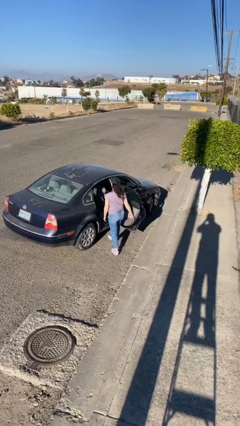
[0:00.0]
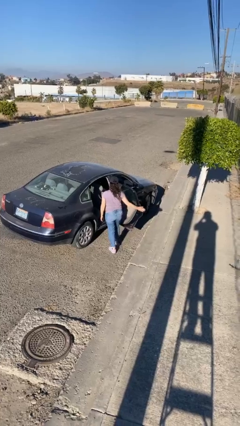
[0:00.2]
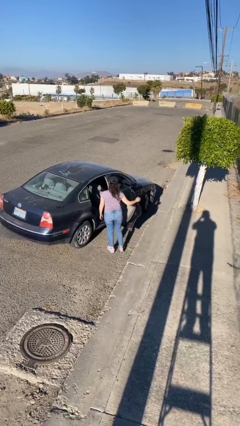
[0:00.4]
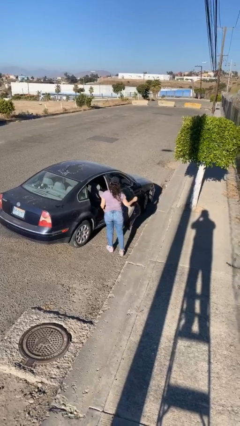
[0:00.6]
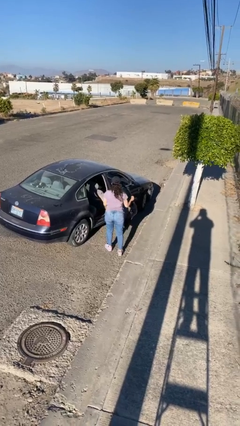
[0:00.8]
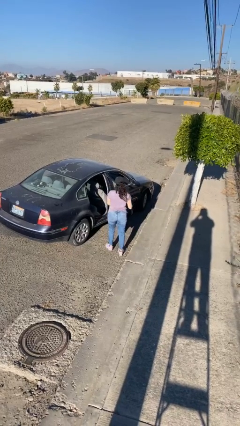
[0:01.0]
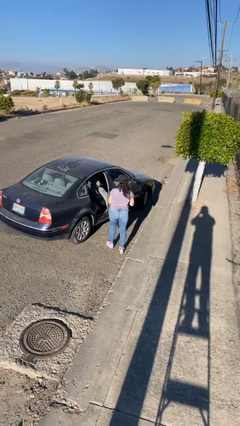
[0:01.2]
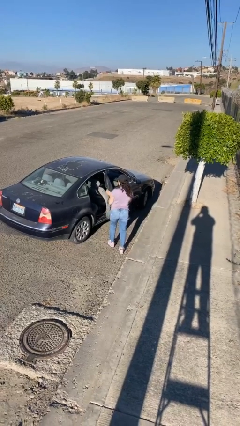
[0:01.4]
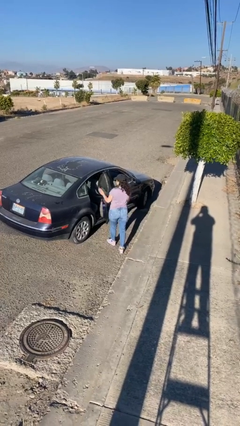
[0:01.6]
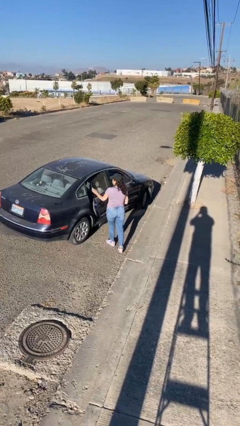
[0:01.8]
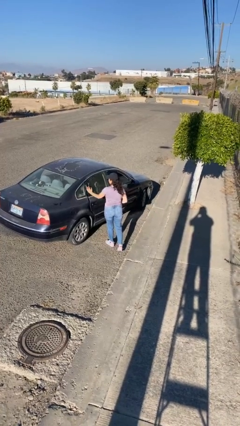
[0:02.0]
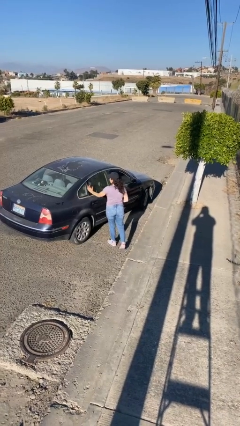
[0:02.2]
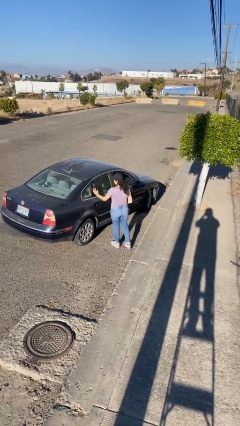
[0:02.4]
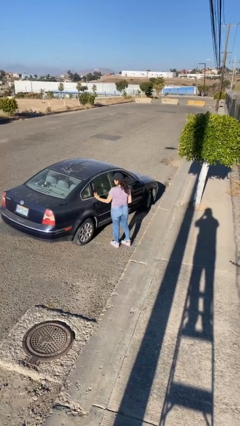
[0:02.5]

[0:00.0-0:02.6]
person closes car door

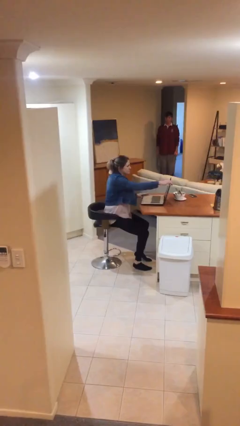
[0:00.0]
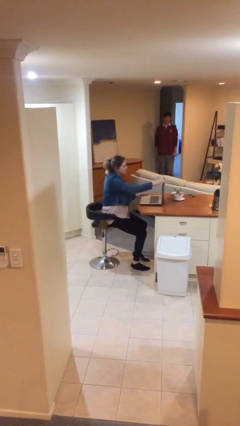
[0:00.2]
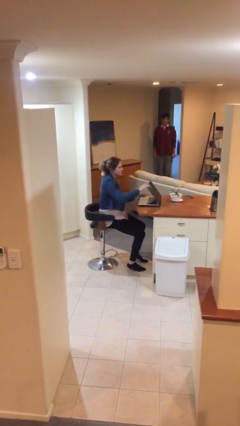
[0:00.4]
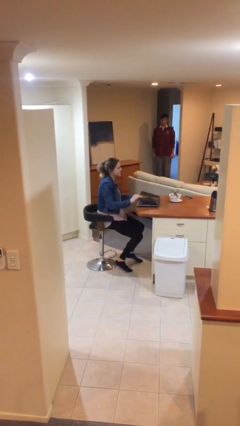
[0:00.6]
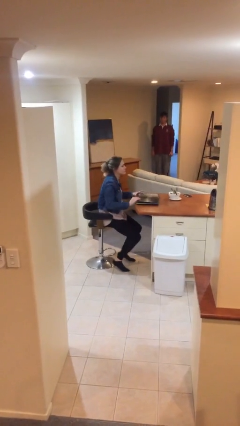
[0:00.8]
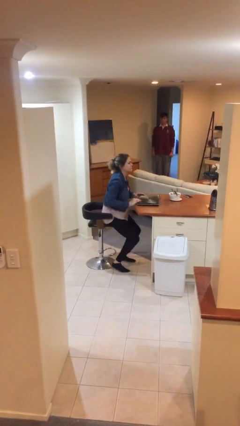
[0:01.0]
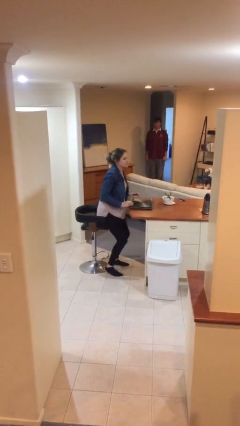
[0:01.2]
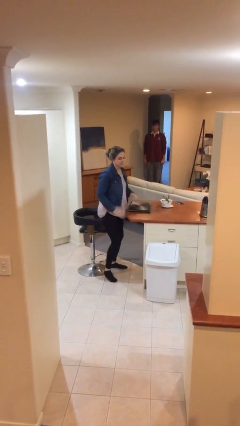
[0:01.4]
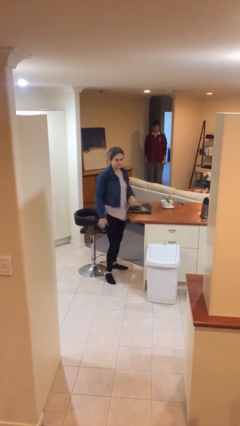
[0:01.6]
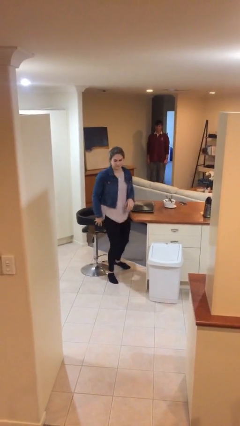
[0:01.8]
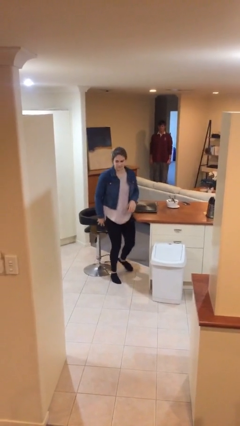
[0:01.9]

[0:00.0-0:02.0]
person stands up

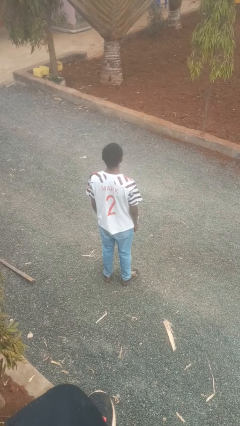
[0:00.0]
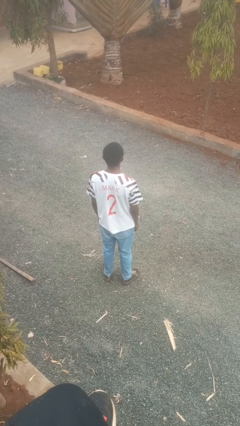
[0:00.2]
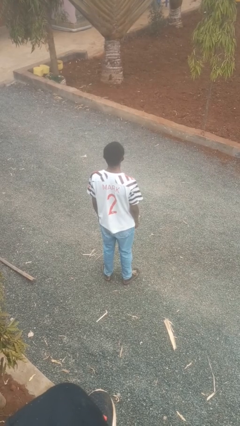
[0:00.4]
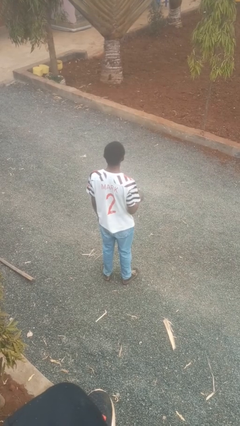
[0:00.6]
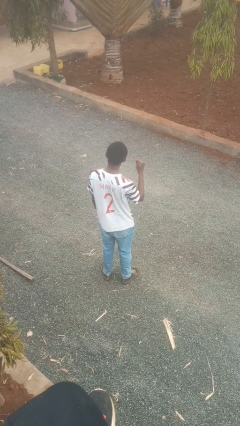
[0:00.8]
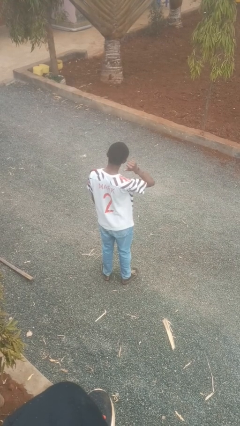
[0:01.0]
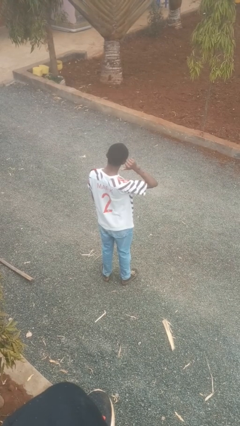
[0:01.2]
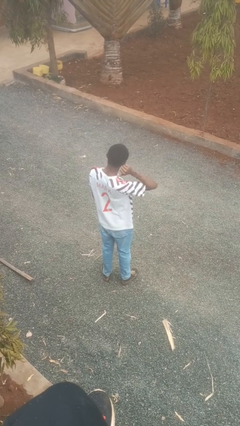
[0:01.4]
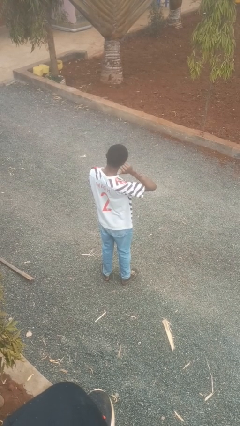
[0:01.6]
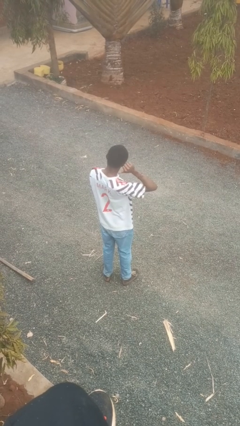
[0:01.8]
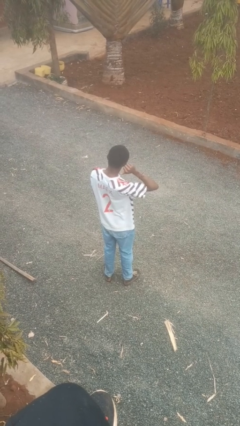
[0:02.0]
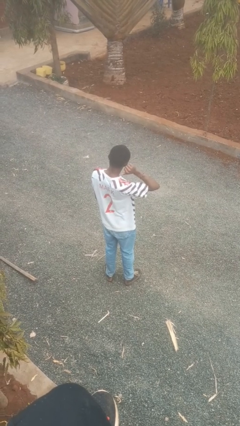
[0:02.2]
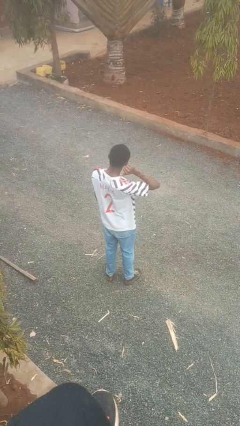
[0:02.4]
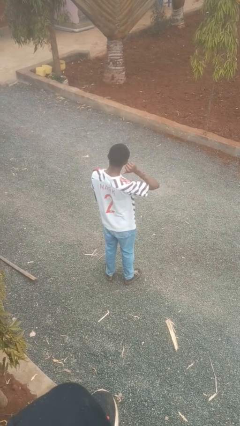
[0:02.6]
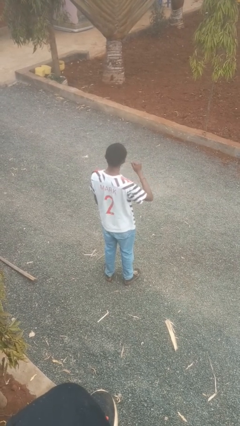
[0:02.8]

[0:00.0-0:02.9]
person gestures behind me

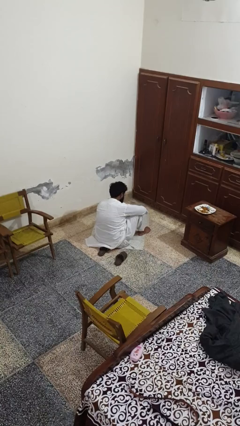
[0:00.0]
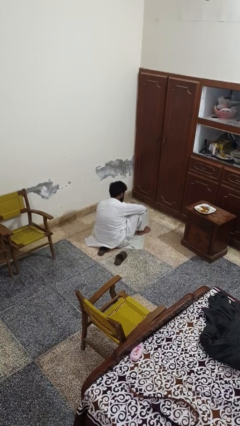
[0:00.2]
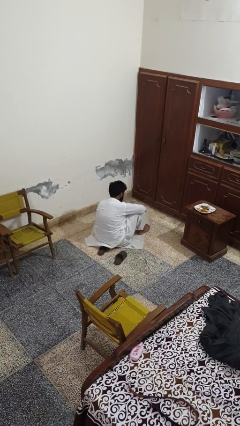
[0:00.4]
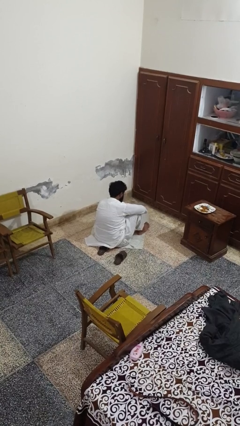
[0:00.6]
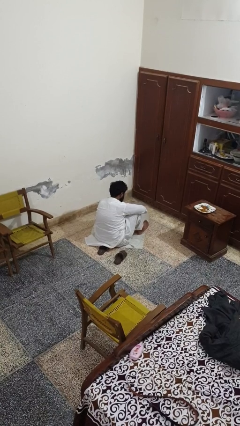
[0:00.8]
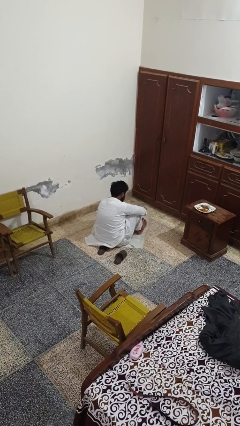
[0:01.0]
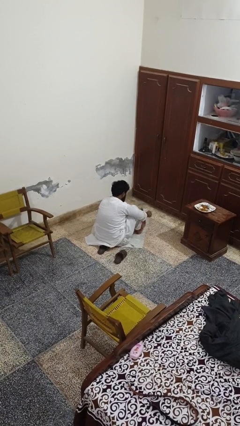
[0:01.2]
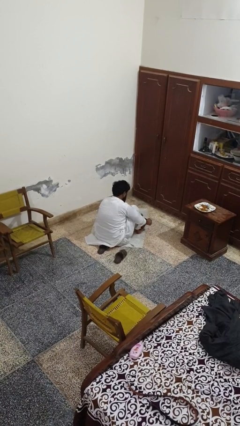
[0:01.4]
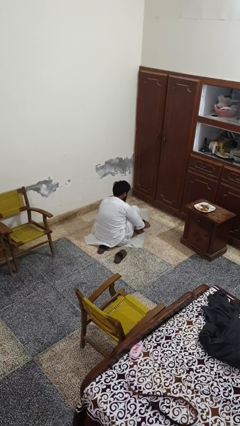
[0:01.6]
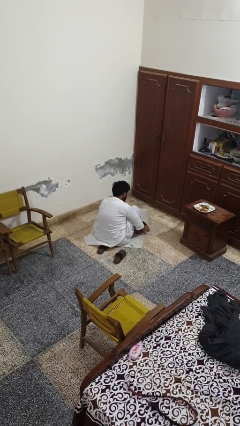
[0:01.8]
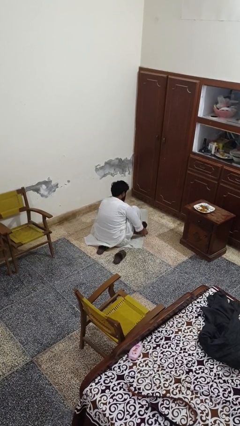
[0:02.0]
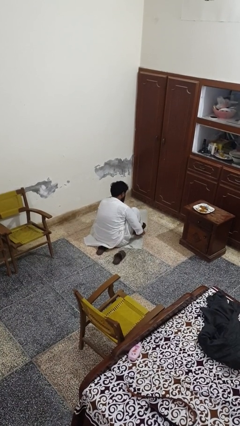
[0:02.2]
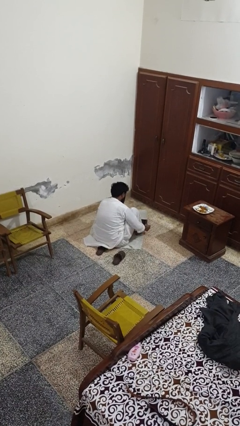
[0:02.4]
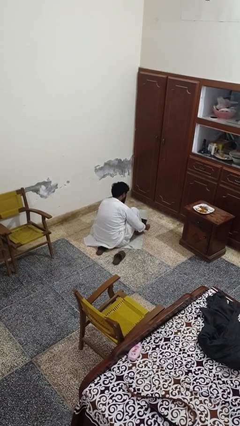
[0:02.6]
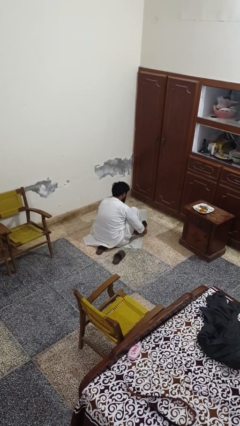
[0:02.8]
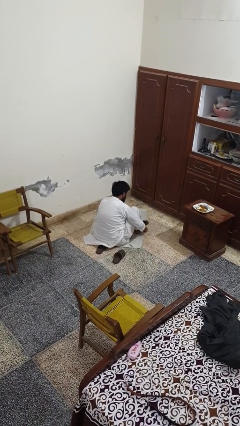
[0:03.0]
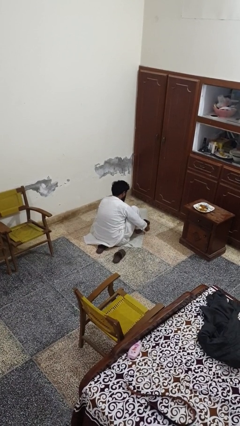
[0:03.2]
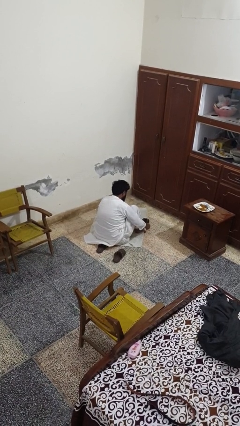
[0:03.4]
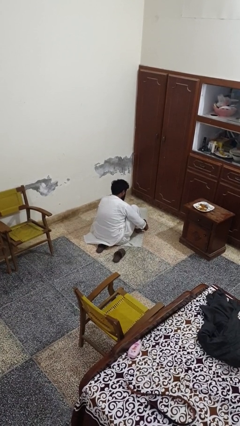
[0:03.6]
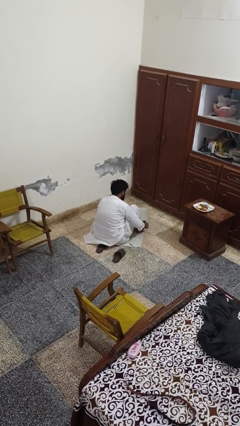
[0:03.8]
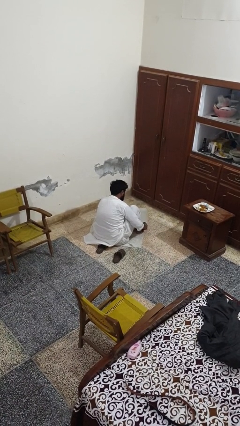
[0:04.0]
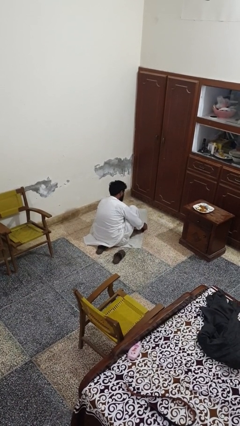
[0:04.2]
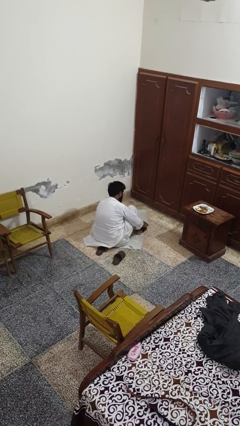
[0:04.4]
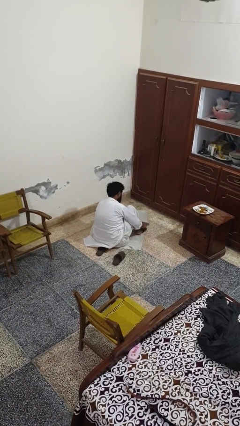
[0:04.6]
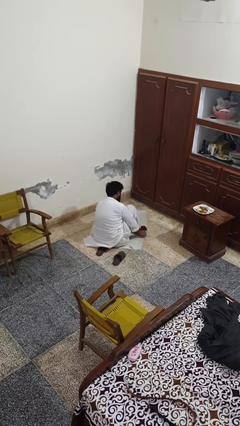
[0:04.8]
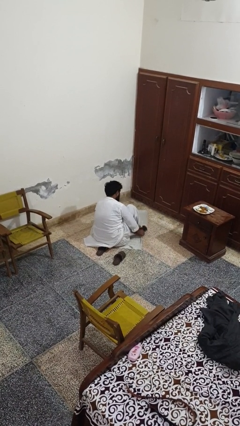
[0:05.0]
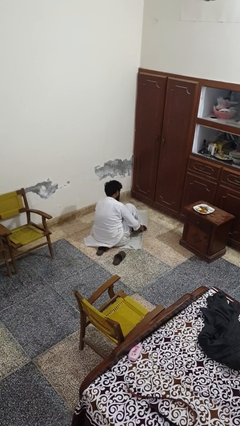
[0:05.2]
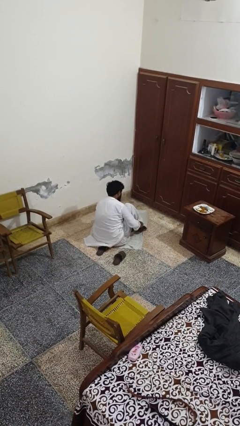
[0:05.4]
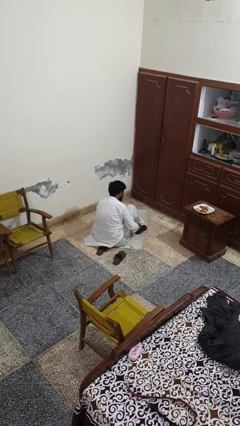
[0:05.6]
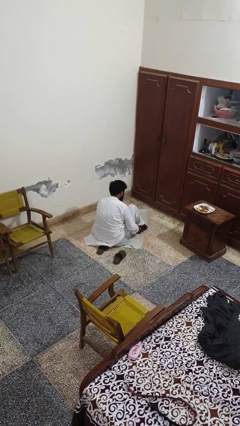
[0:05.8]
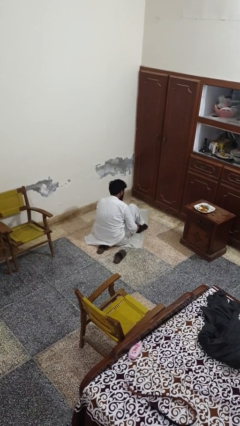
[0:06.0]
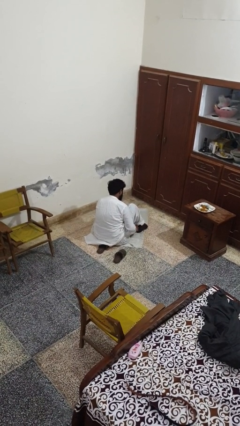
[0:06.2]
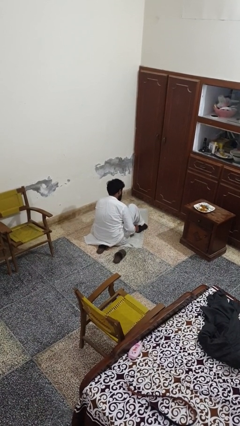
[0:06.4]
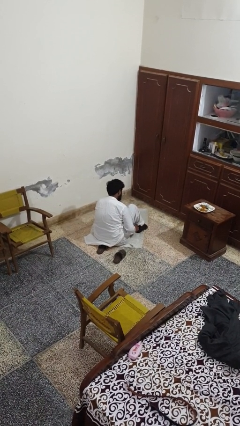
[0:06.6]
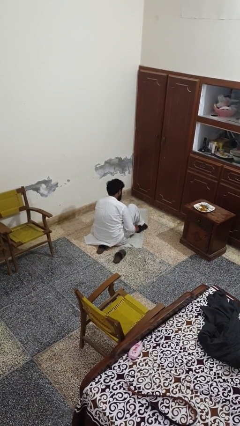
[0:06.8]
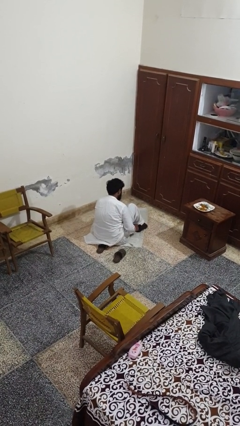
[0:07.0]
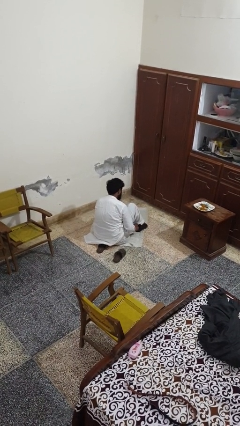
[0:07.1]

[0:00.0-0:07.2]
person puts on socks

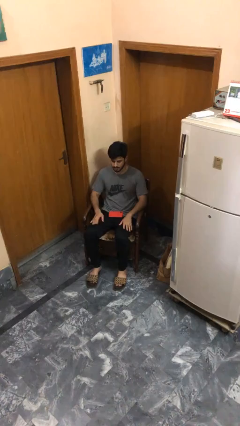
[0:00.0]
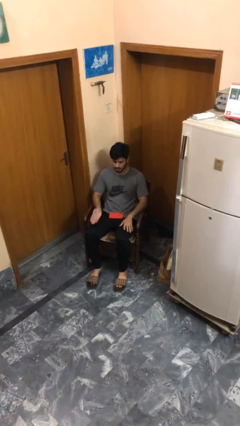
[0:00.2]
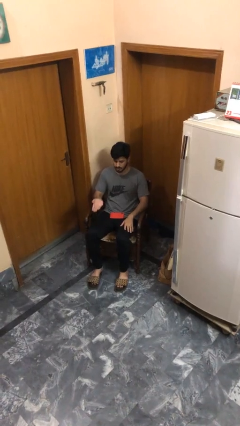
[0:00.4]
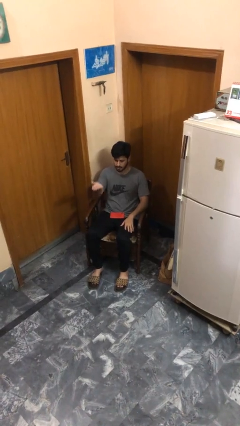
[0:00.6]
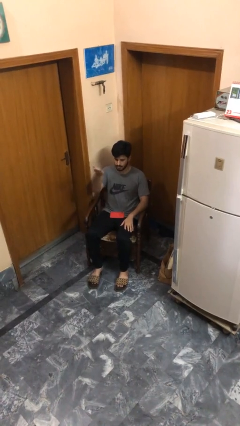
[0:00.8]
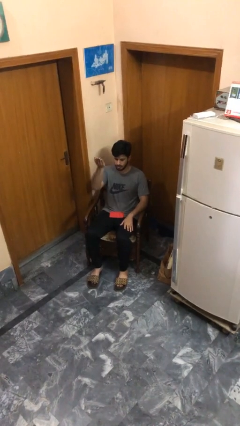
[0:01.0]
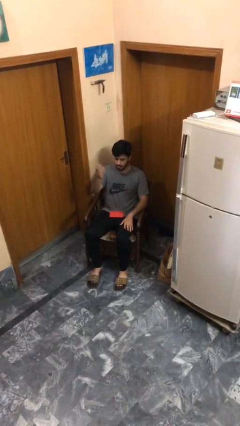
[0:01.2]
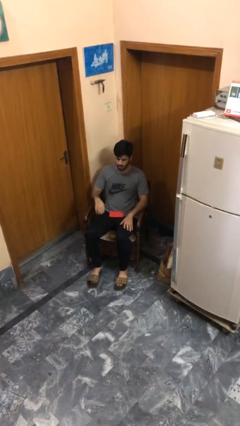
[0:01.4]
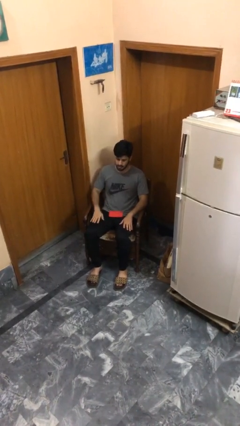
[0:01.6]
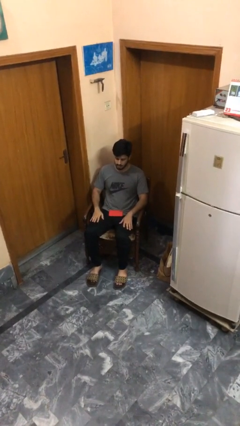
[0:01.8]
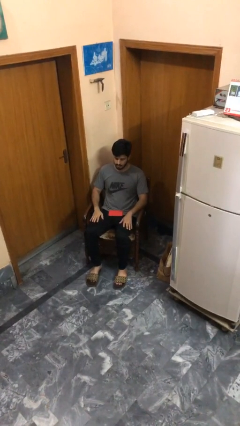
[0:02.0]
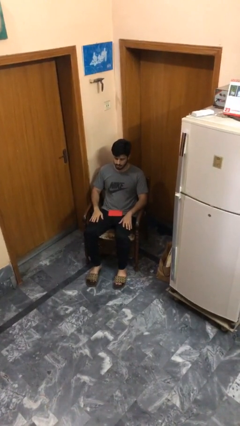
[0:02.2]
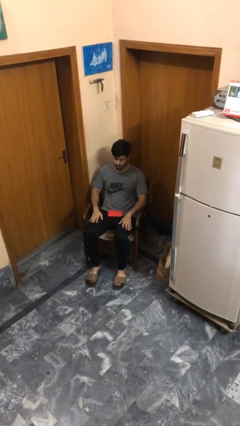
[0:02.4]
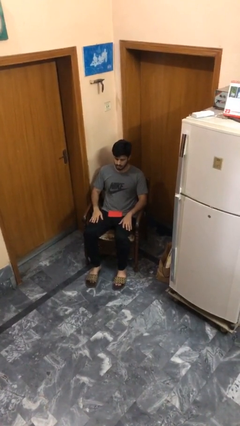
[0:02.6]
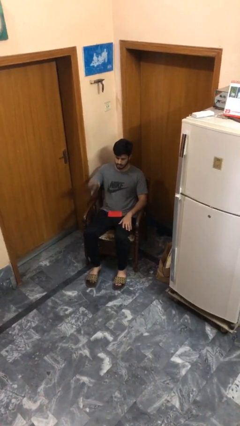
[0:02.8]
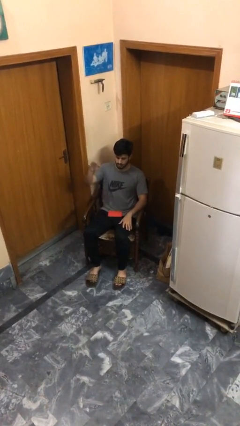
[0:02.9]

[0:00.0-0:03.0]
person gestures swipe up
